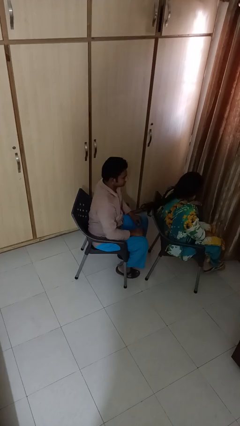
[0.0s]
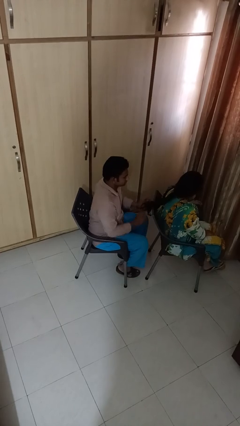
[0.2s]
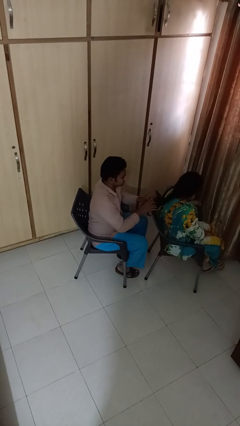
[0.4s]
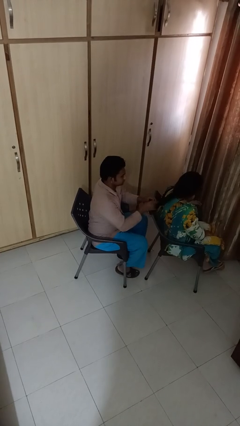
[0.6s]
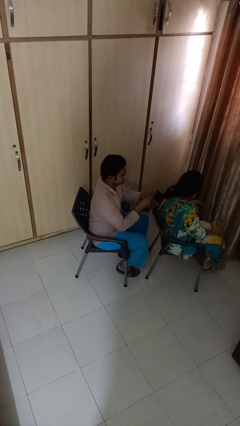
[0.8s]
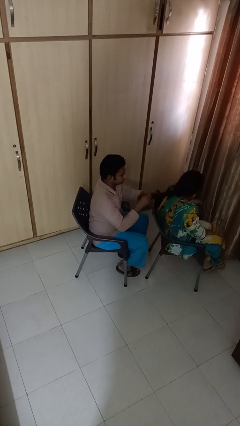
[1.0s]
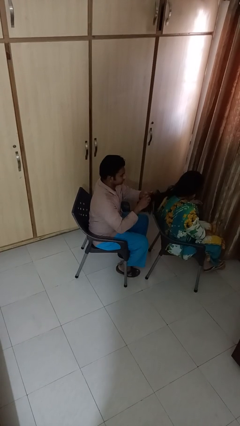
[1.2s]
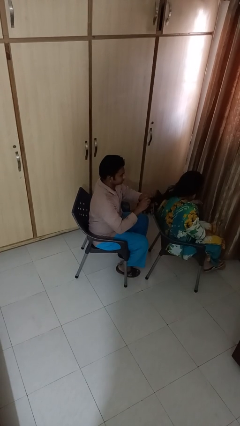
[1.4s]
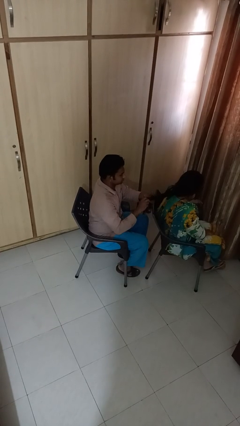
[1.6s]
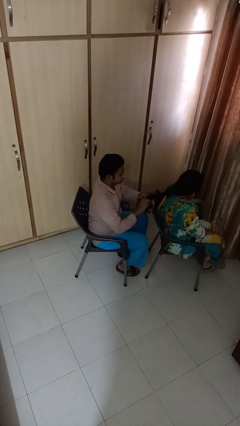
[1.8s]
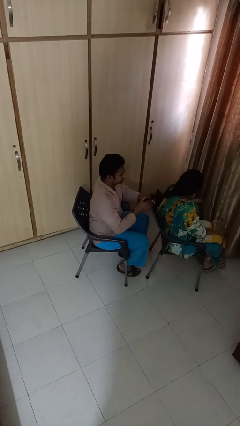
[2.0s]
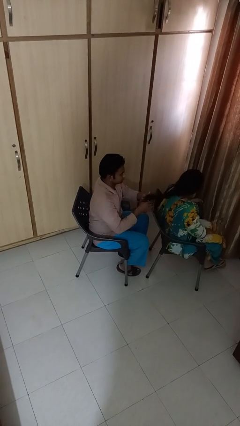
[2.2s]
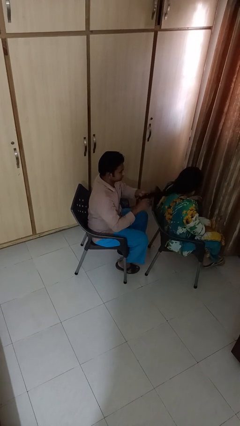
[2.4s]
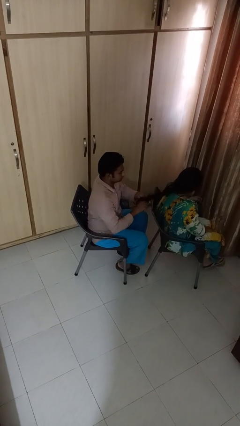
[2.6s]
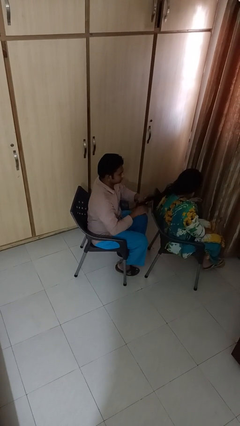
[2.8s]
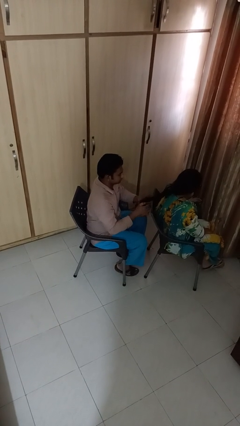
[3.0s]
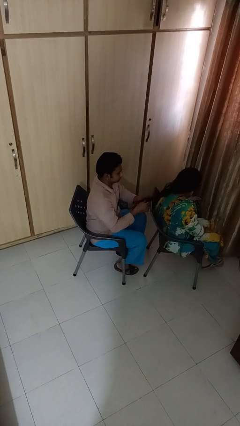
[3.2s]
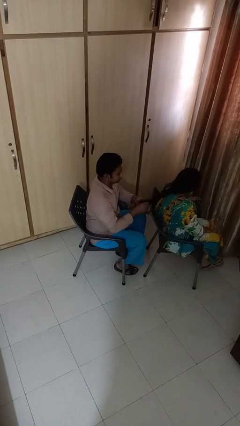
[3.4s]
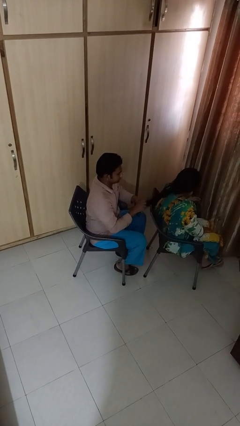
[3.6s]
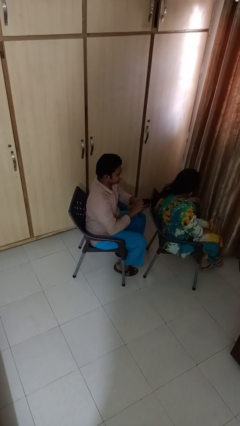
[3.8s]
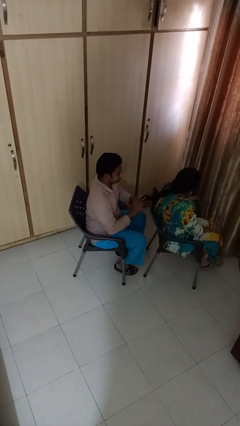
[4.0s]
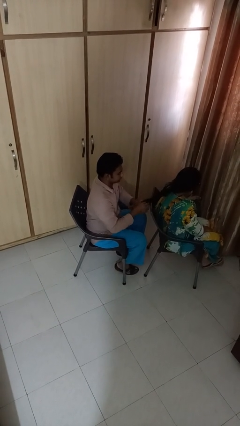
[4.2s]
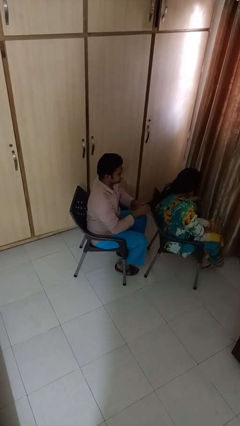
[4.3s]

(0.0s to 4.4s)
person braids hair of person

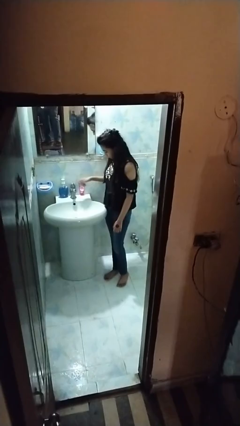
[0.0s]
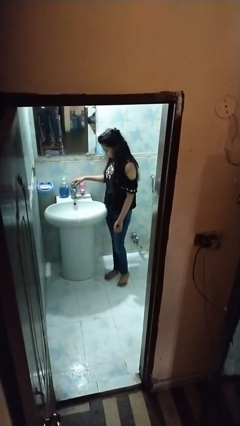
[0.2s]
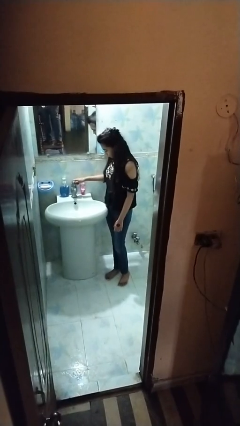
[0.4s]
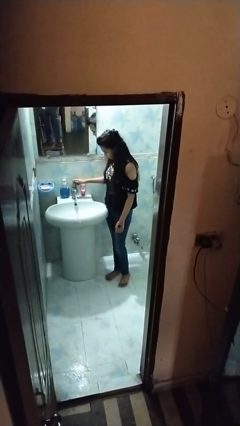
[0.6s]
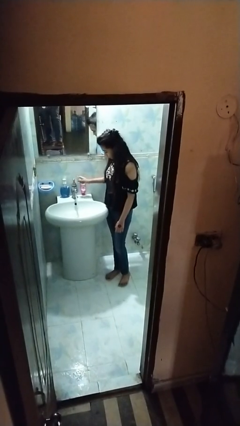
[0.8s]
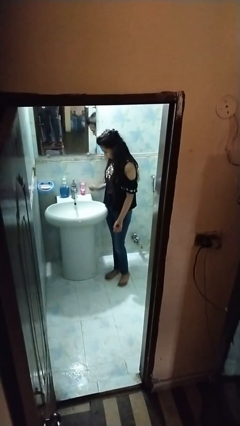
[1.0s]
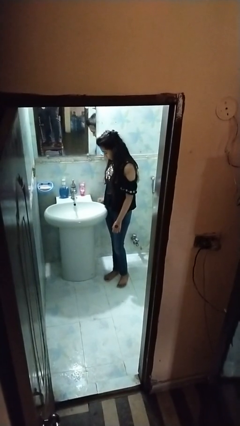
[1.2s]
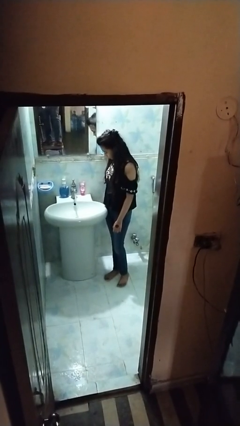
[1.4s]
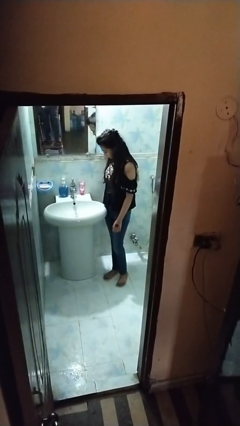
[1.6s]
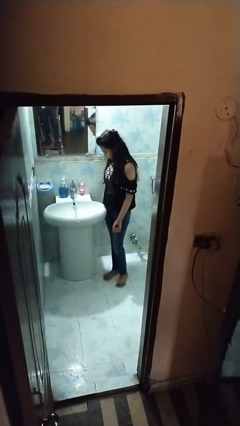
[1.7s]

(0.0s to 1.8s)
person turns on faucet

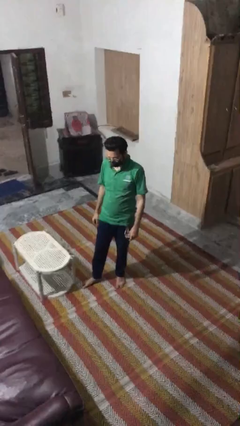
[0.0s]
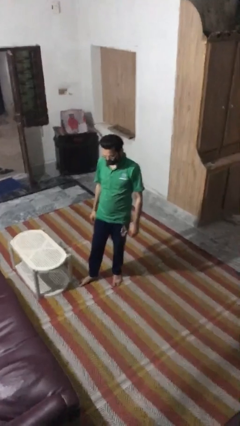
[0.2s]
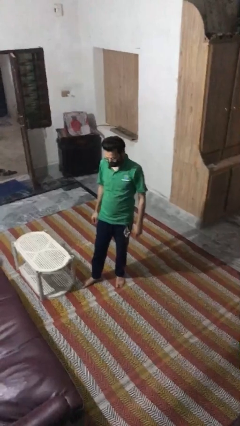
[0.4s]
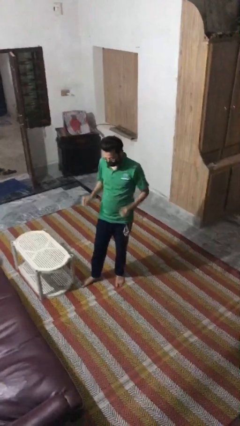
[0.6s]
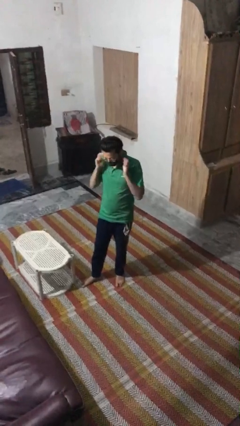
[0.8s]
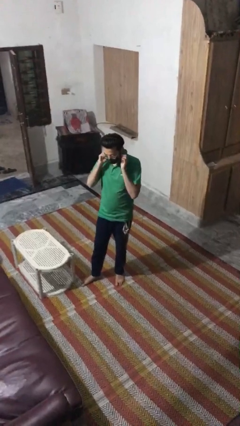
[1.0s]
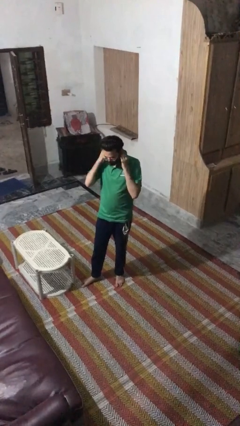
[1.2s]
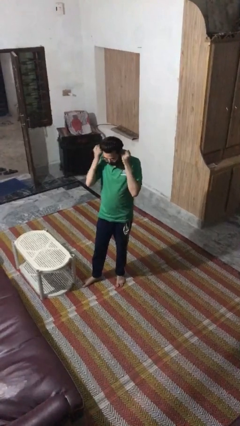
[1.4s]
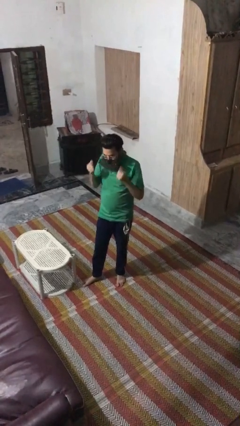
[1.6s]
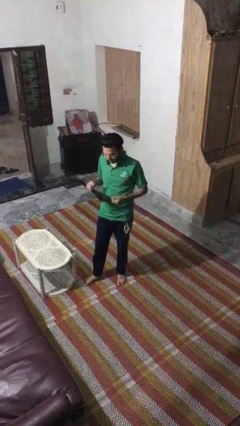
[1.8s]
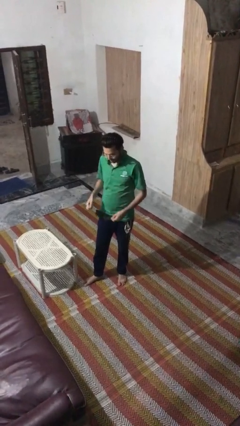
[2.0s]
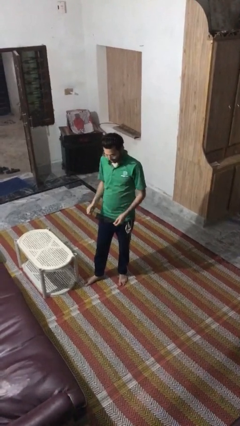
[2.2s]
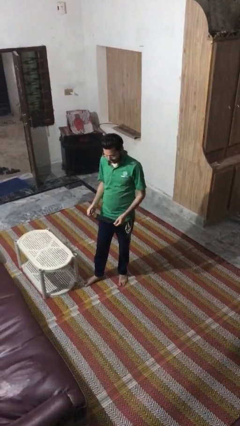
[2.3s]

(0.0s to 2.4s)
person takes off facemask

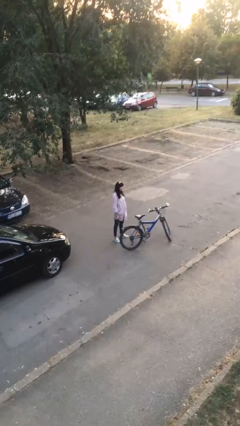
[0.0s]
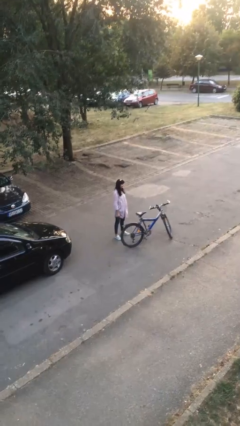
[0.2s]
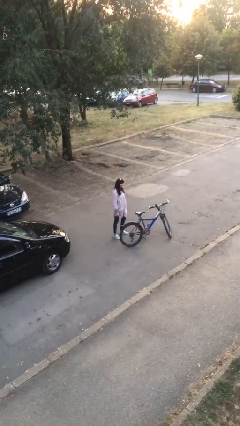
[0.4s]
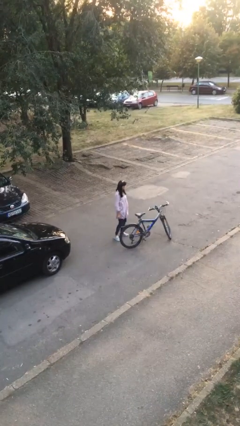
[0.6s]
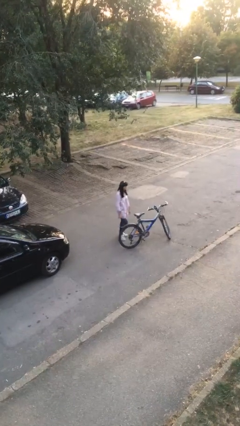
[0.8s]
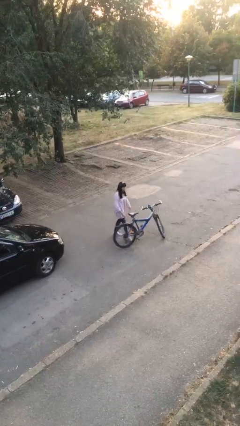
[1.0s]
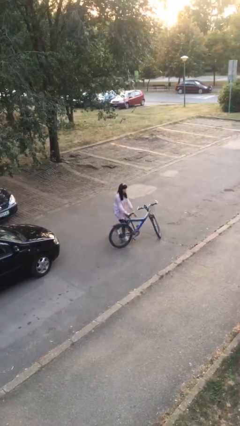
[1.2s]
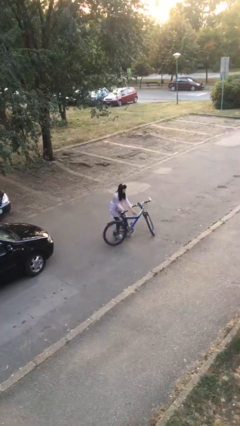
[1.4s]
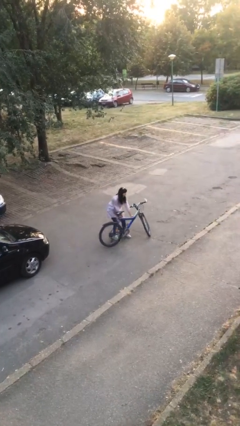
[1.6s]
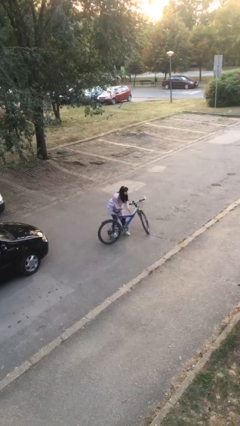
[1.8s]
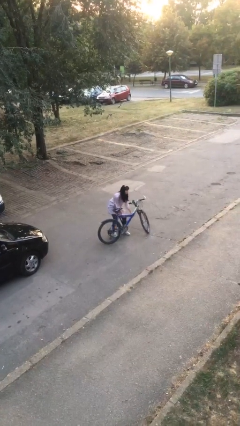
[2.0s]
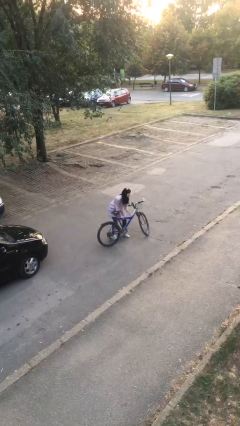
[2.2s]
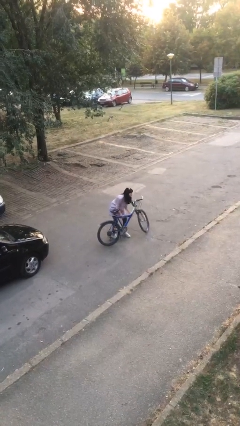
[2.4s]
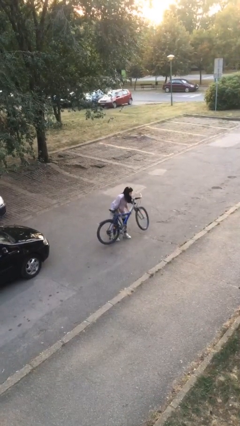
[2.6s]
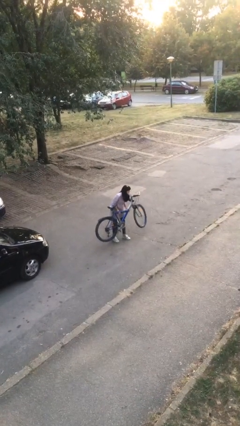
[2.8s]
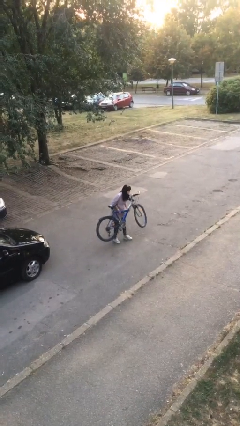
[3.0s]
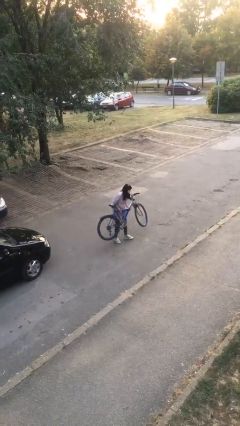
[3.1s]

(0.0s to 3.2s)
person picks up object from floor

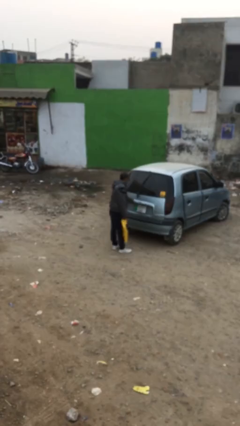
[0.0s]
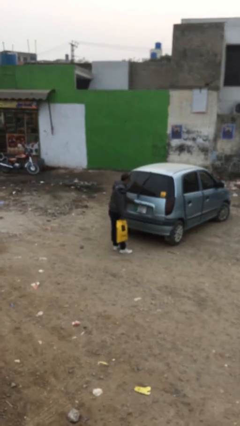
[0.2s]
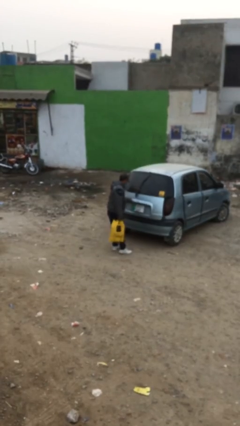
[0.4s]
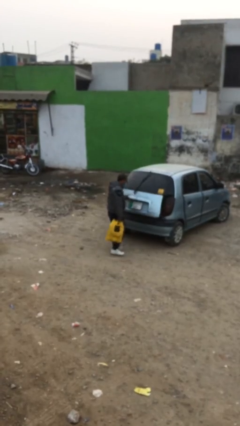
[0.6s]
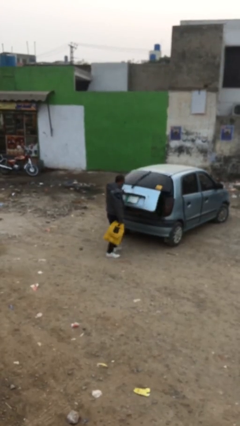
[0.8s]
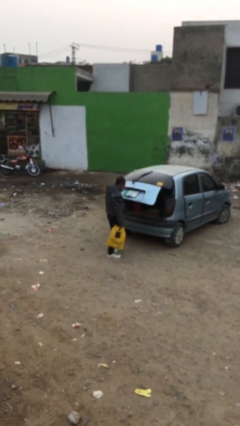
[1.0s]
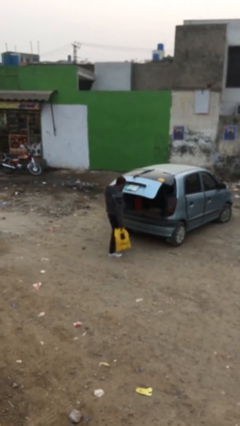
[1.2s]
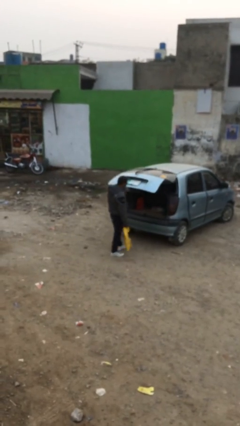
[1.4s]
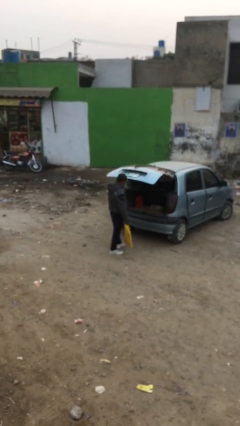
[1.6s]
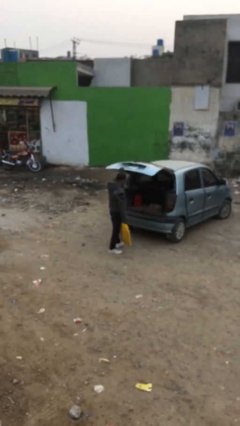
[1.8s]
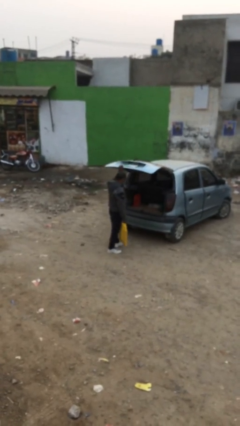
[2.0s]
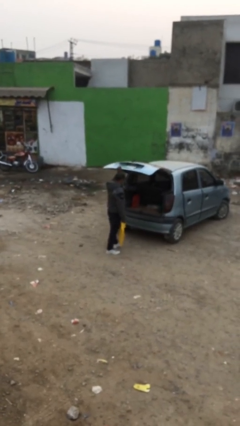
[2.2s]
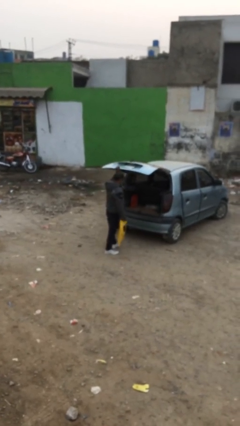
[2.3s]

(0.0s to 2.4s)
person opens car trunk

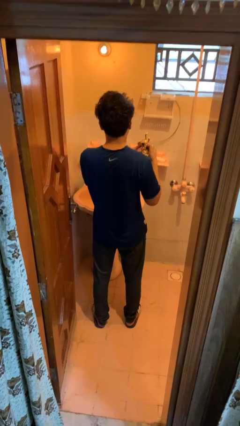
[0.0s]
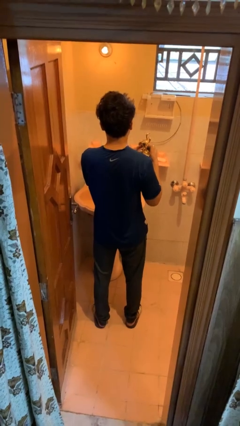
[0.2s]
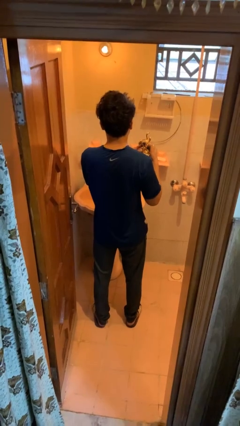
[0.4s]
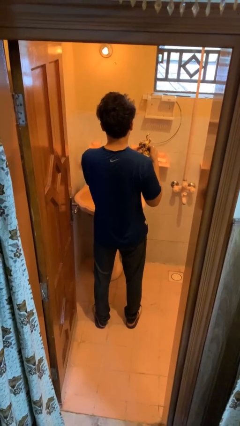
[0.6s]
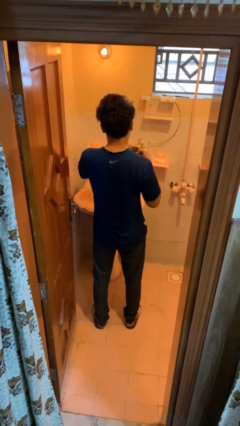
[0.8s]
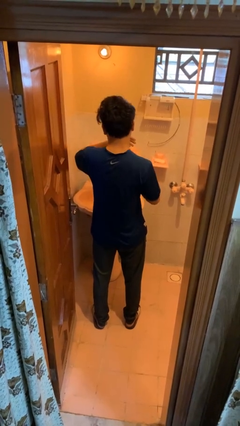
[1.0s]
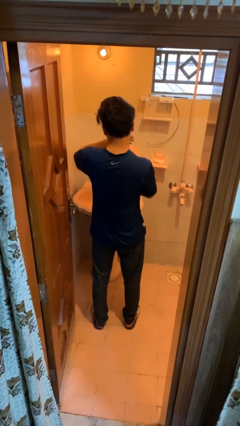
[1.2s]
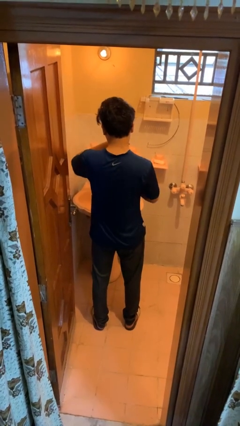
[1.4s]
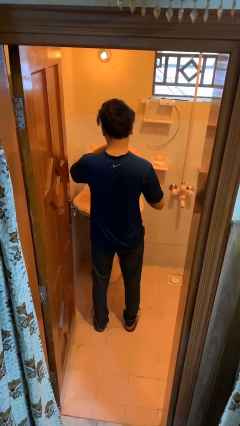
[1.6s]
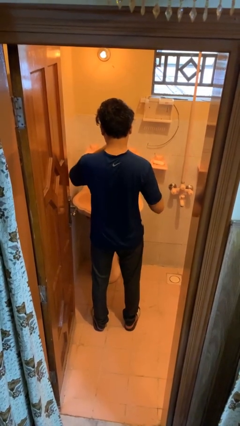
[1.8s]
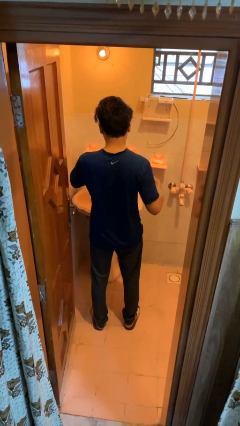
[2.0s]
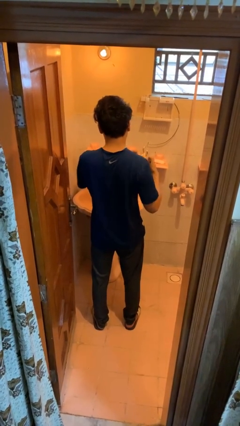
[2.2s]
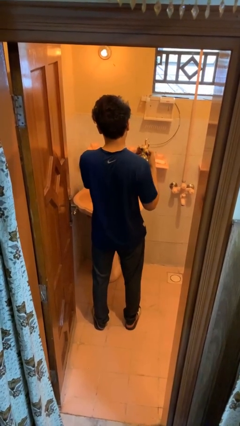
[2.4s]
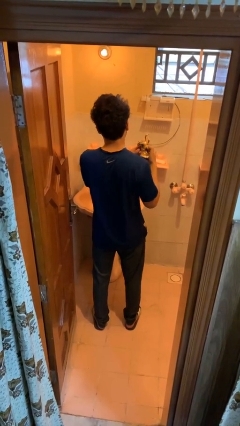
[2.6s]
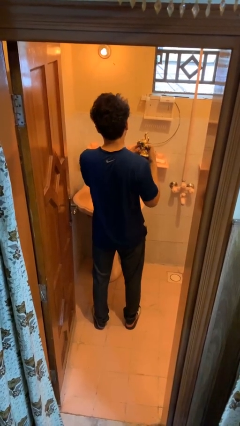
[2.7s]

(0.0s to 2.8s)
person applies deodorant

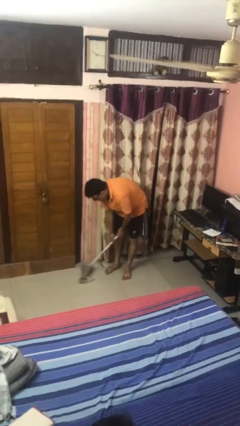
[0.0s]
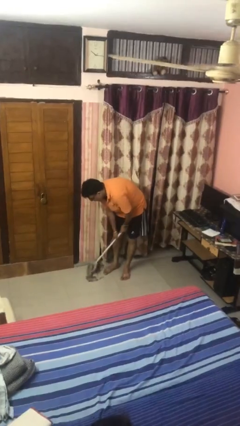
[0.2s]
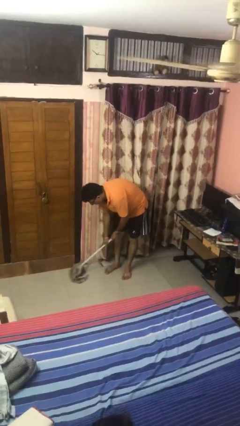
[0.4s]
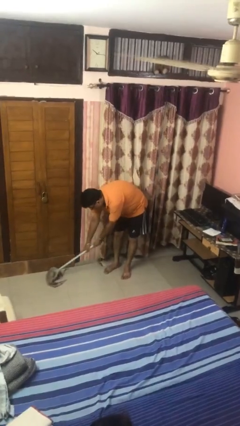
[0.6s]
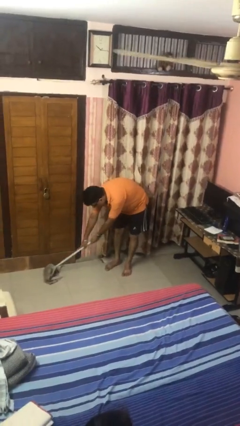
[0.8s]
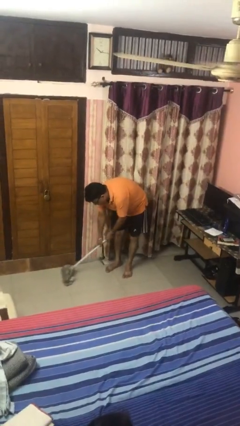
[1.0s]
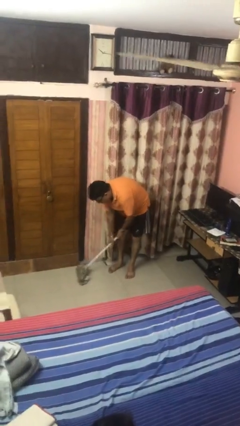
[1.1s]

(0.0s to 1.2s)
person mops
